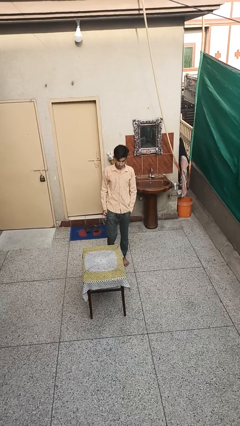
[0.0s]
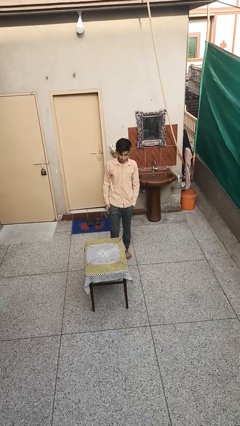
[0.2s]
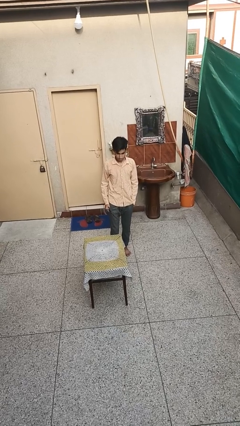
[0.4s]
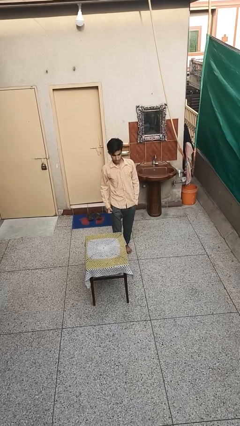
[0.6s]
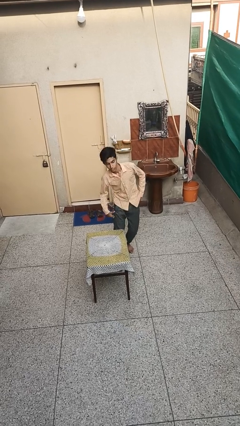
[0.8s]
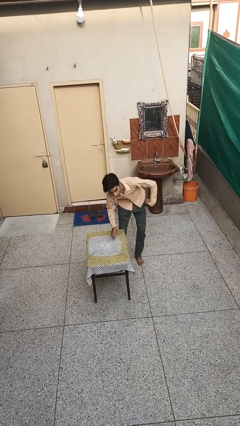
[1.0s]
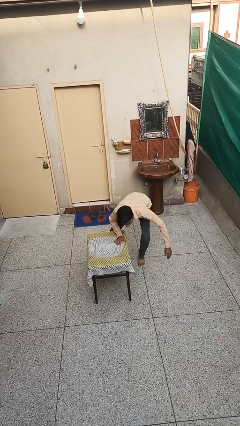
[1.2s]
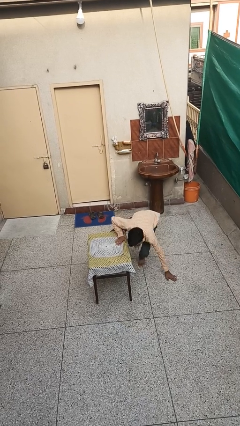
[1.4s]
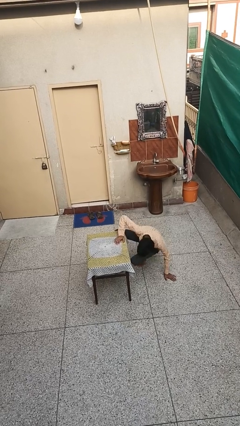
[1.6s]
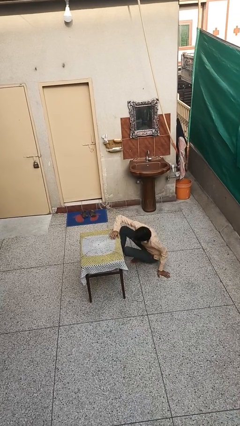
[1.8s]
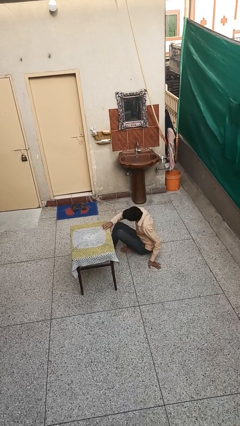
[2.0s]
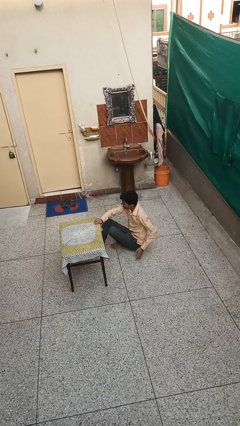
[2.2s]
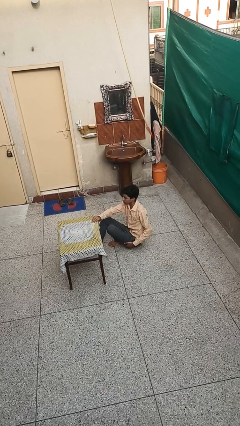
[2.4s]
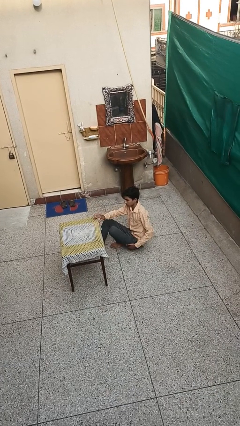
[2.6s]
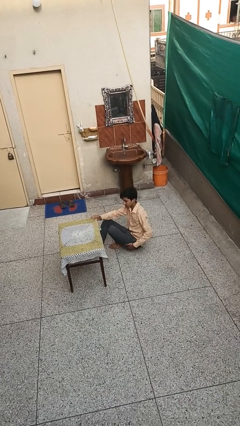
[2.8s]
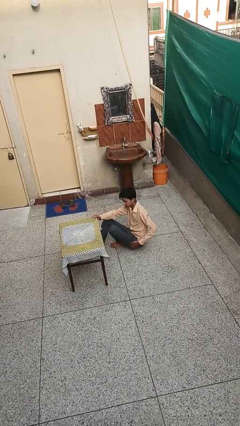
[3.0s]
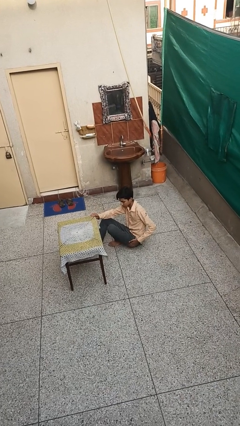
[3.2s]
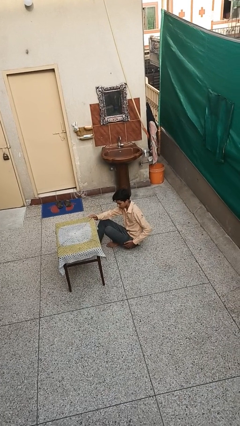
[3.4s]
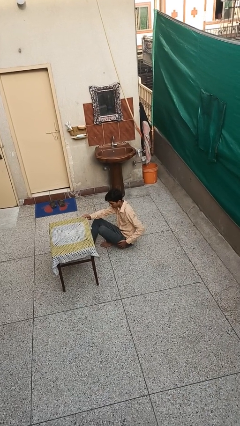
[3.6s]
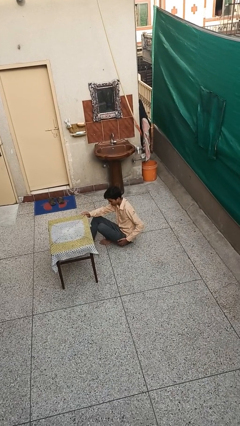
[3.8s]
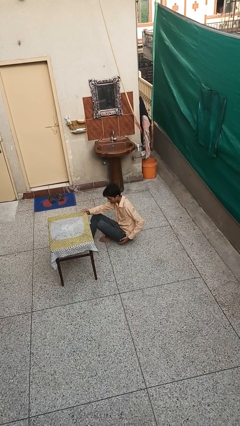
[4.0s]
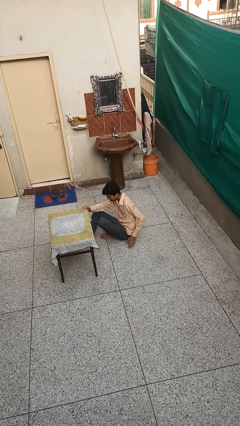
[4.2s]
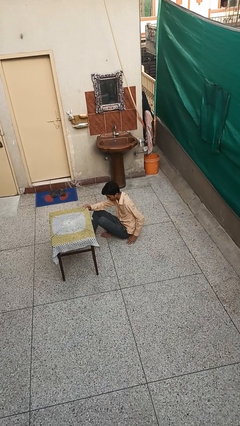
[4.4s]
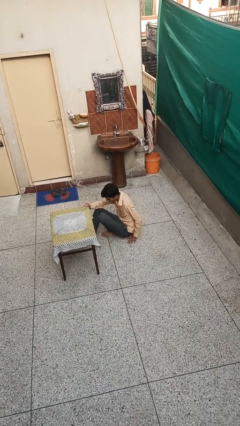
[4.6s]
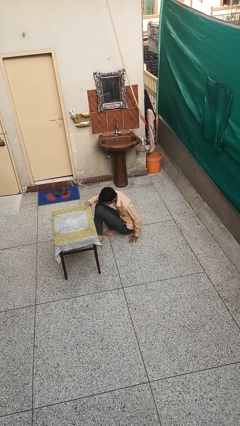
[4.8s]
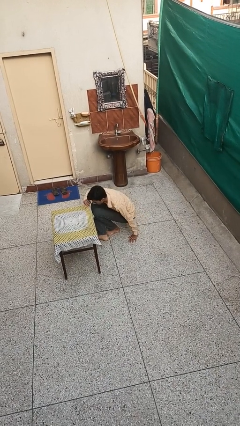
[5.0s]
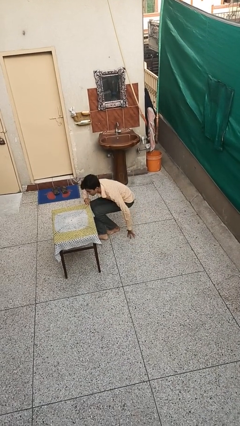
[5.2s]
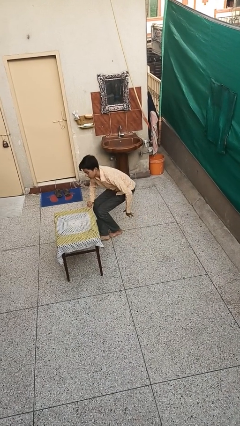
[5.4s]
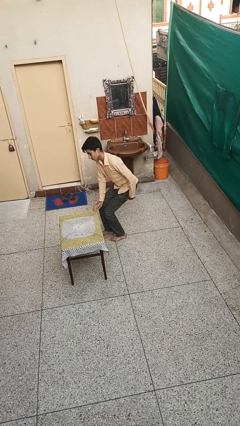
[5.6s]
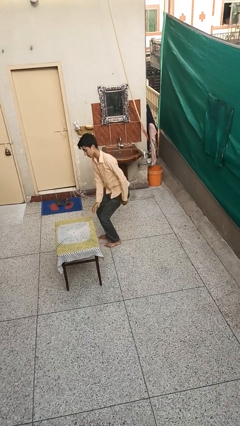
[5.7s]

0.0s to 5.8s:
person bumps into table

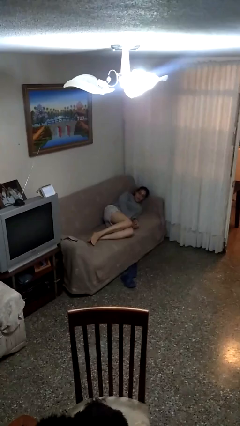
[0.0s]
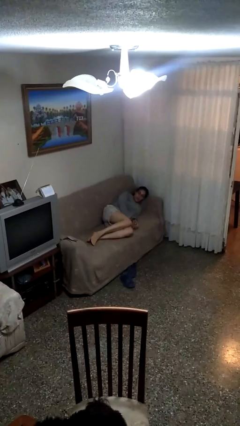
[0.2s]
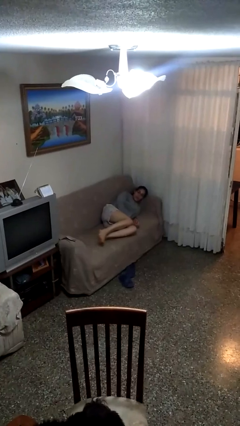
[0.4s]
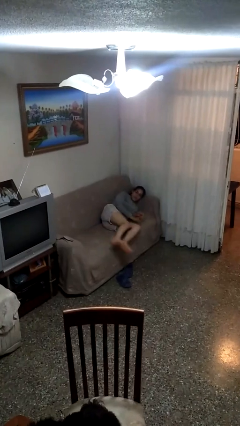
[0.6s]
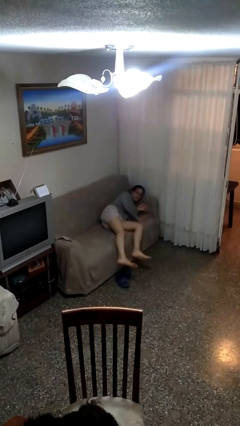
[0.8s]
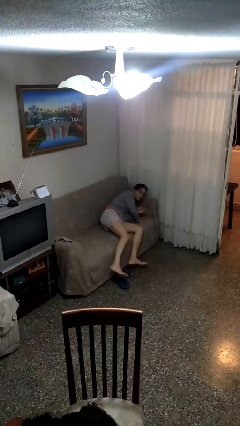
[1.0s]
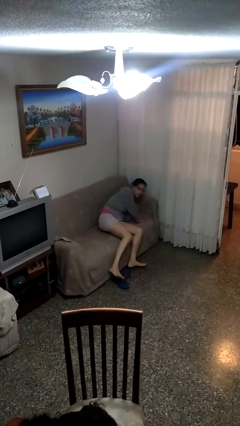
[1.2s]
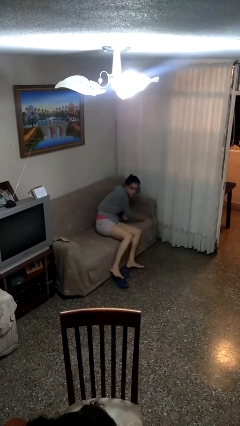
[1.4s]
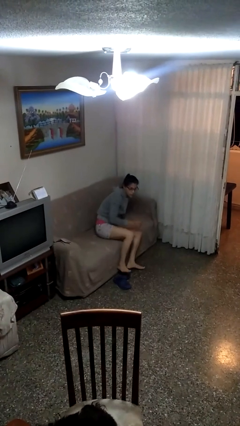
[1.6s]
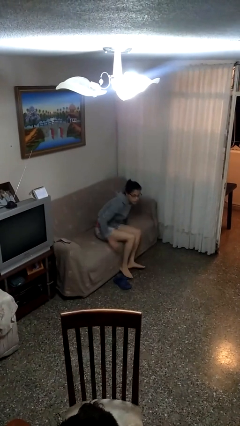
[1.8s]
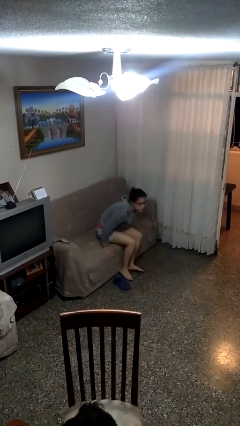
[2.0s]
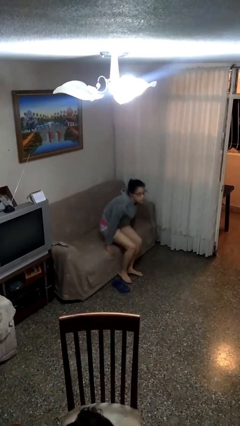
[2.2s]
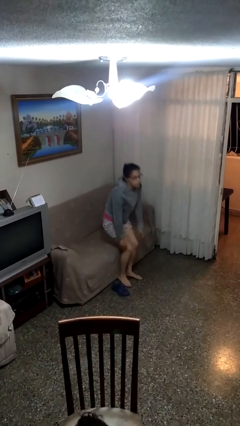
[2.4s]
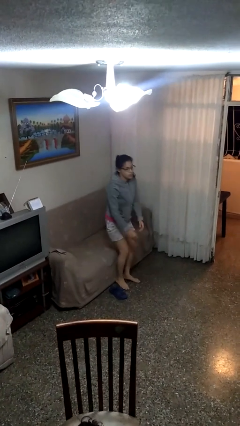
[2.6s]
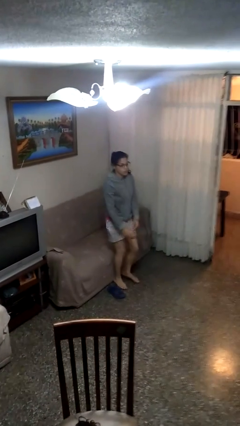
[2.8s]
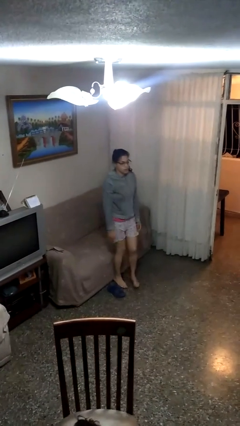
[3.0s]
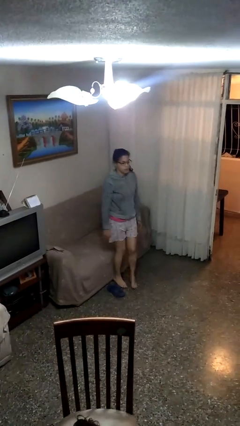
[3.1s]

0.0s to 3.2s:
person stands up

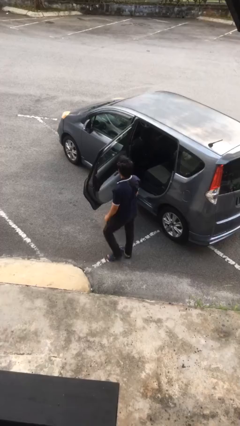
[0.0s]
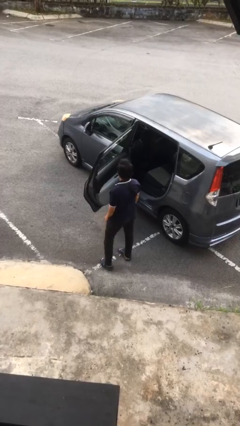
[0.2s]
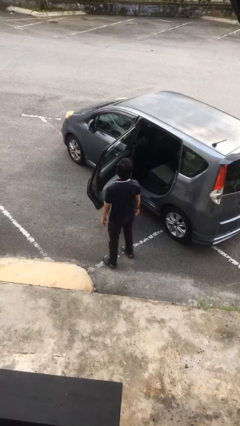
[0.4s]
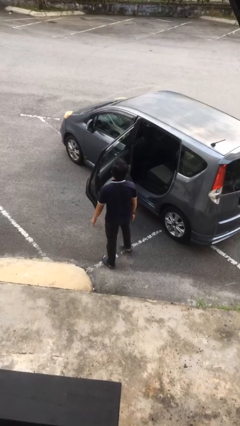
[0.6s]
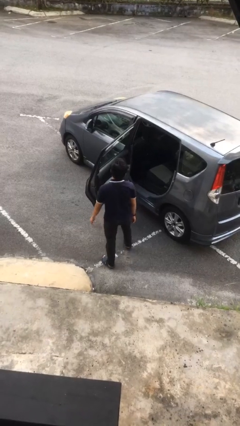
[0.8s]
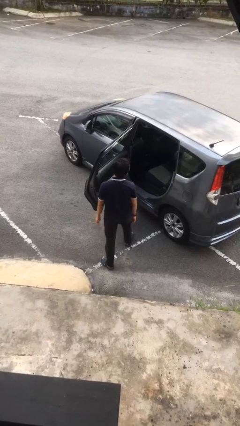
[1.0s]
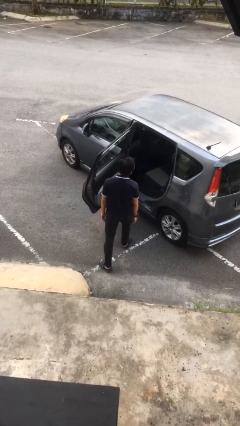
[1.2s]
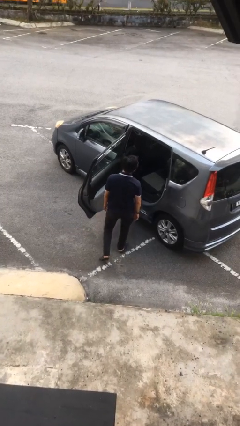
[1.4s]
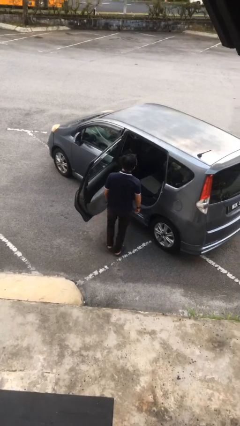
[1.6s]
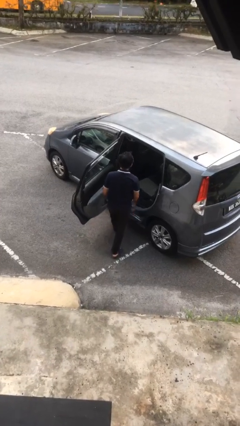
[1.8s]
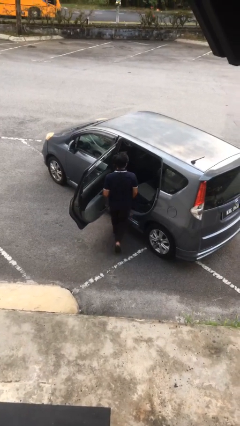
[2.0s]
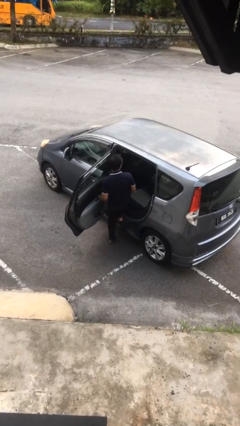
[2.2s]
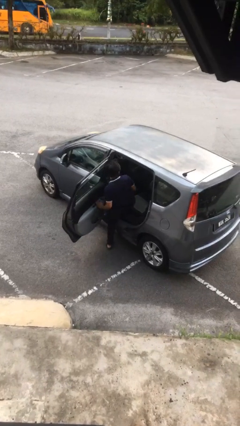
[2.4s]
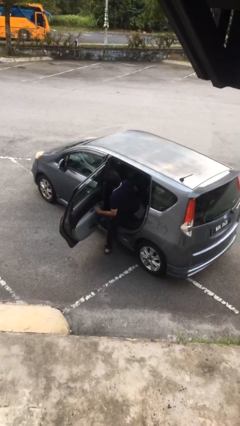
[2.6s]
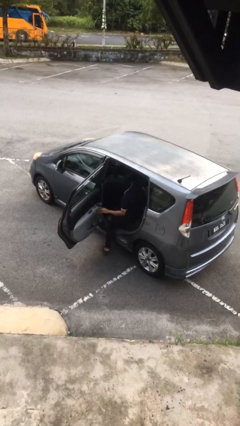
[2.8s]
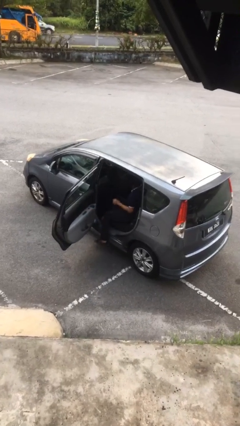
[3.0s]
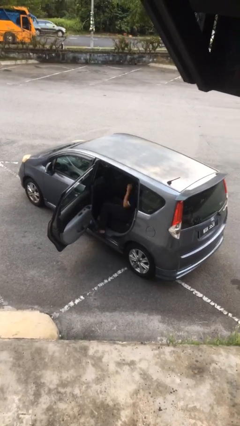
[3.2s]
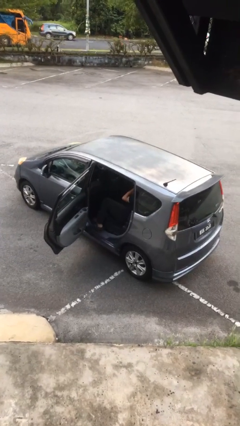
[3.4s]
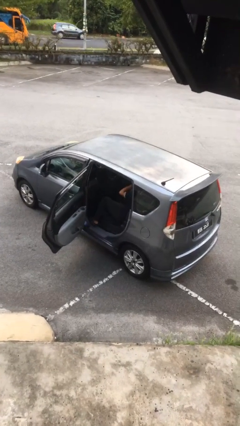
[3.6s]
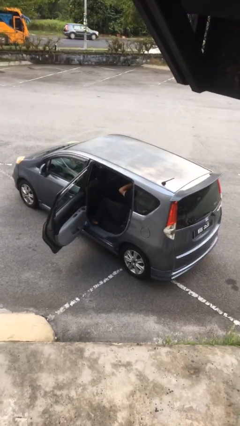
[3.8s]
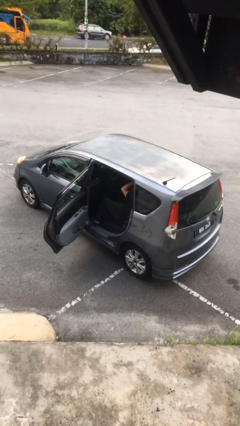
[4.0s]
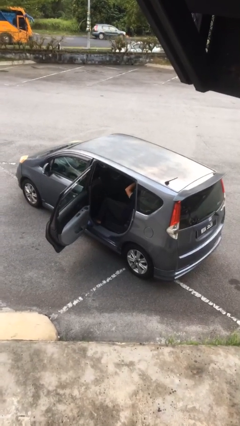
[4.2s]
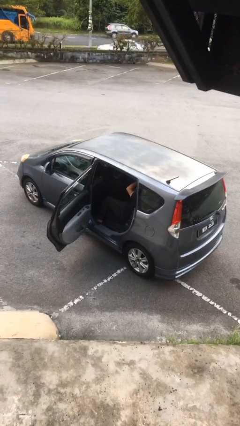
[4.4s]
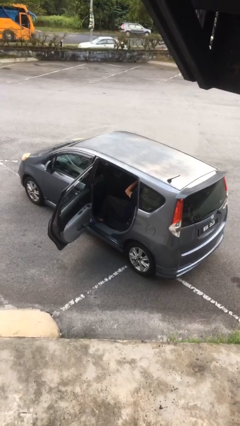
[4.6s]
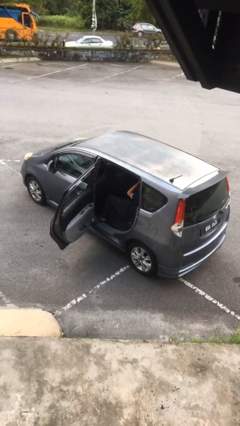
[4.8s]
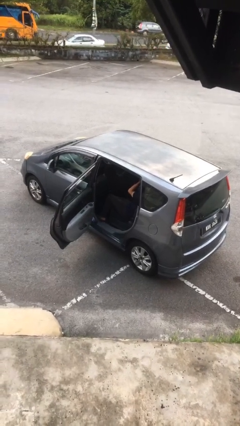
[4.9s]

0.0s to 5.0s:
person enters car

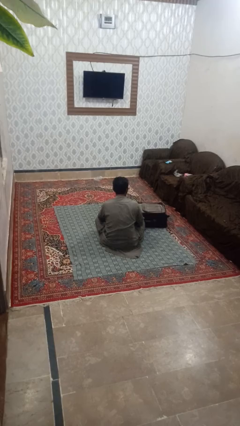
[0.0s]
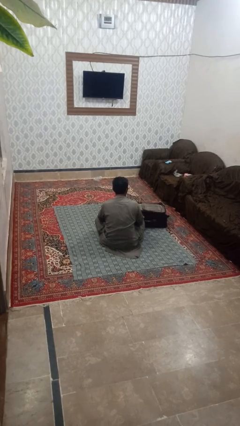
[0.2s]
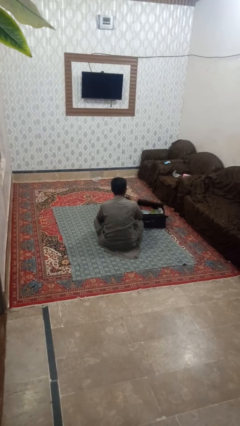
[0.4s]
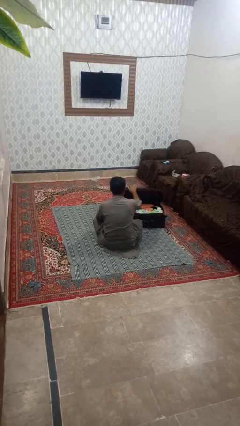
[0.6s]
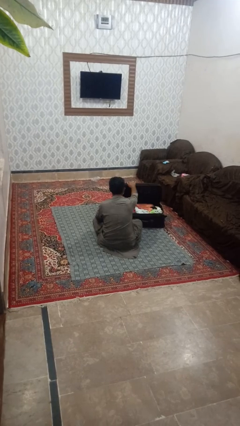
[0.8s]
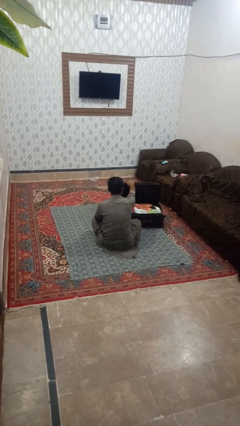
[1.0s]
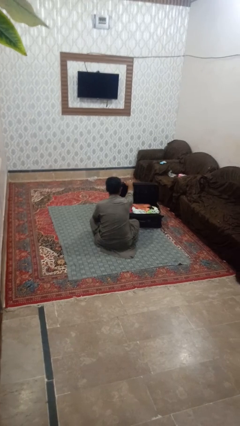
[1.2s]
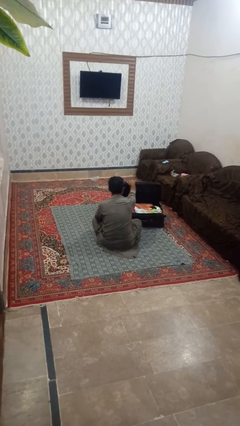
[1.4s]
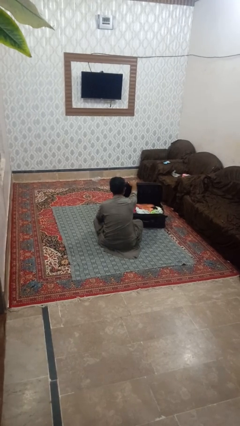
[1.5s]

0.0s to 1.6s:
person opens suitcase

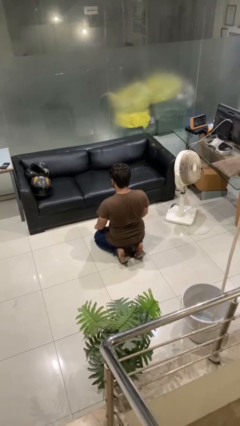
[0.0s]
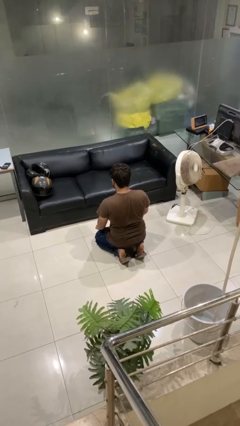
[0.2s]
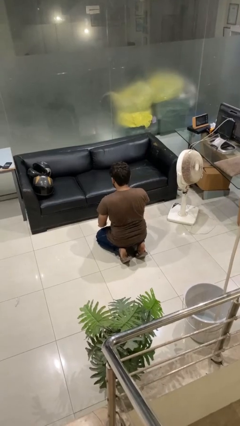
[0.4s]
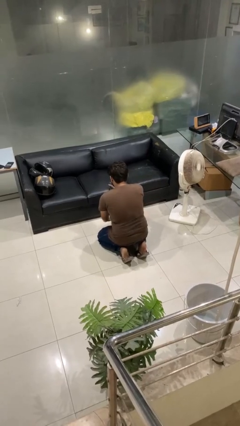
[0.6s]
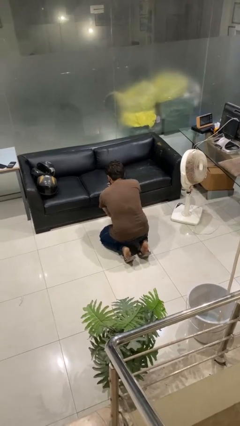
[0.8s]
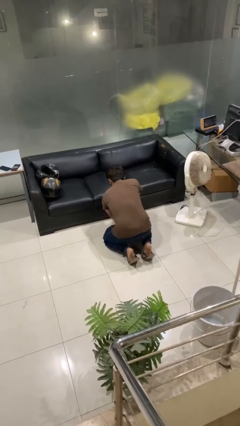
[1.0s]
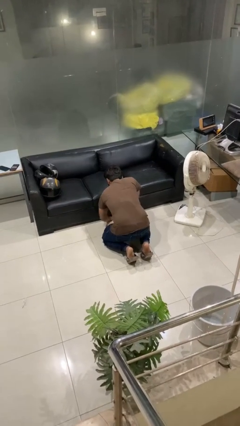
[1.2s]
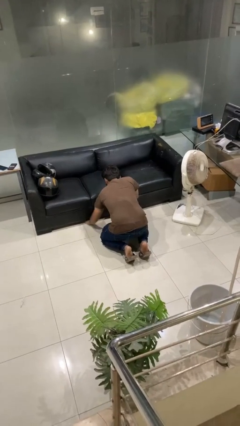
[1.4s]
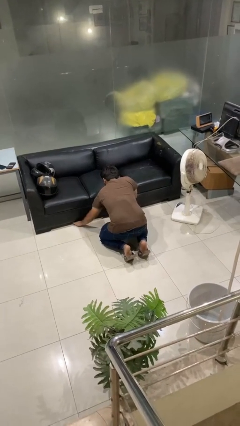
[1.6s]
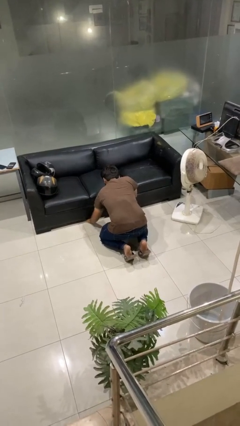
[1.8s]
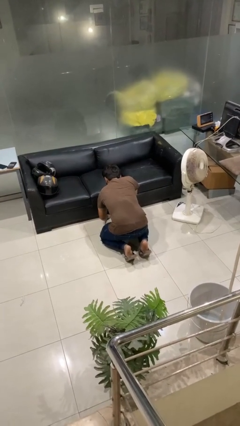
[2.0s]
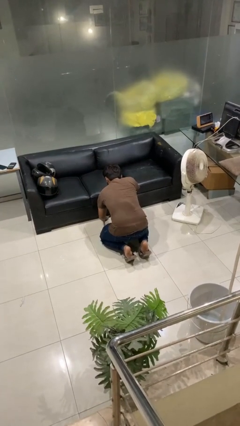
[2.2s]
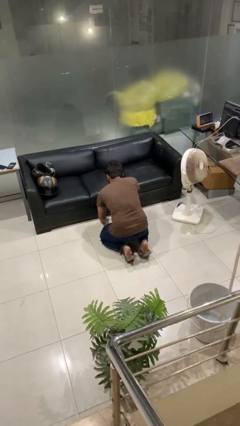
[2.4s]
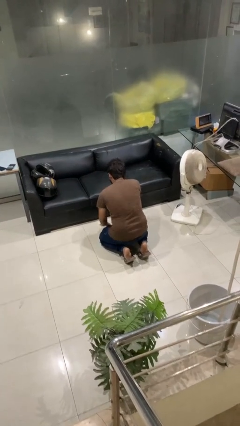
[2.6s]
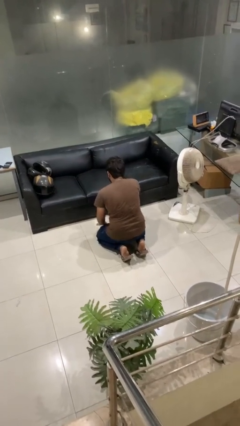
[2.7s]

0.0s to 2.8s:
person searches under couch
